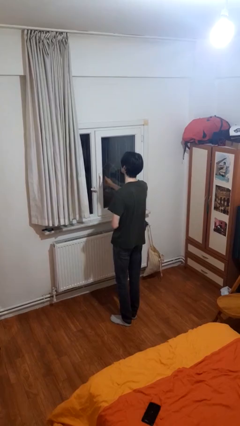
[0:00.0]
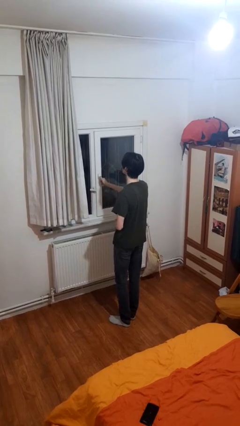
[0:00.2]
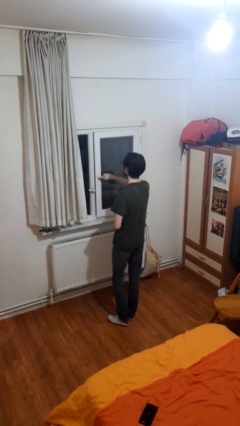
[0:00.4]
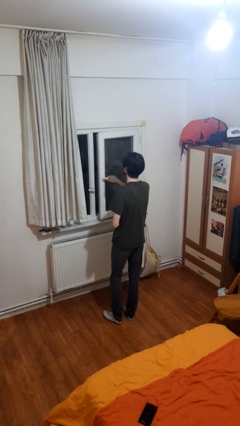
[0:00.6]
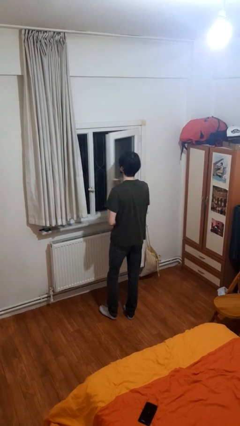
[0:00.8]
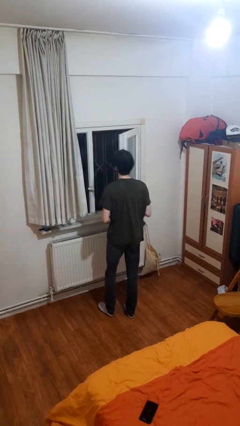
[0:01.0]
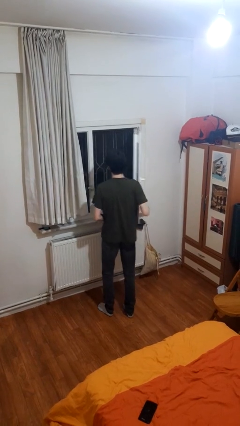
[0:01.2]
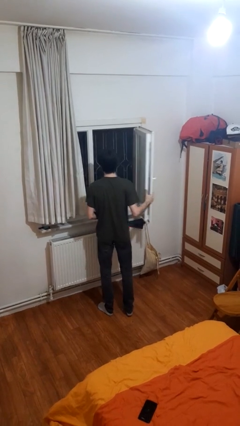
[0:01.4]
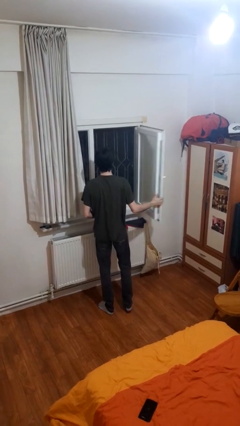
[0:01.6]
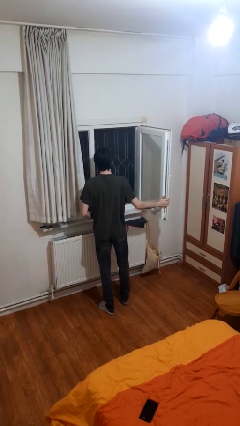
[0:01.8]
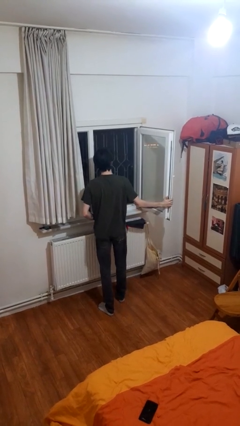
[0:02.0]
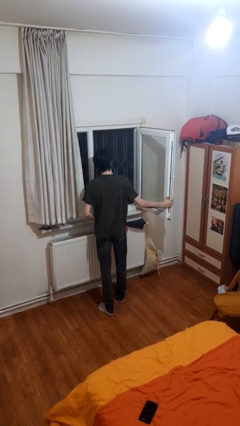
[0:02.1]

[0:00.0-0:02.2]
person opens home window

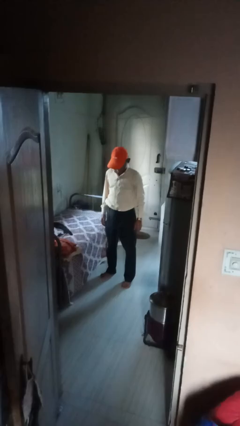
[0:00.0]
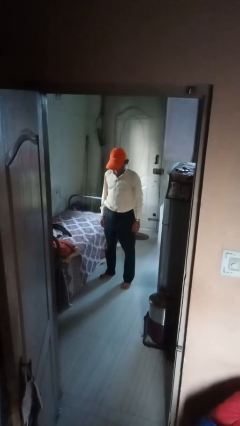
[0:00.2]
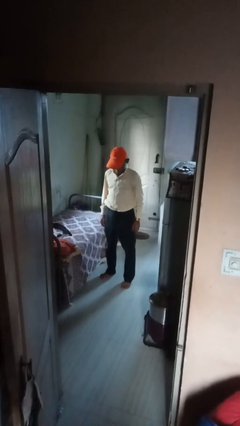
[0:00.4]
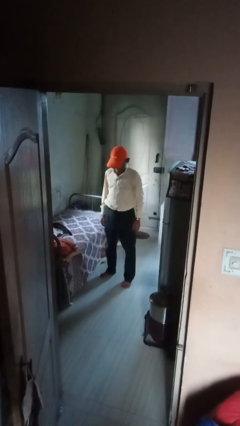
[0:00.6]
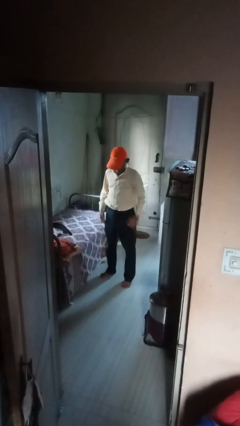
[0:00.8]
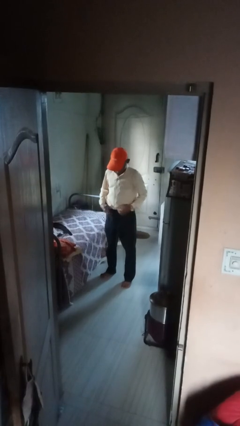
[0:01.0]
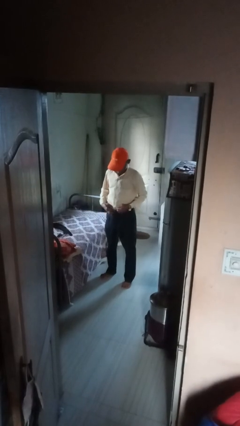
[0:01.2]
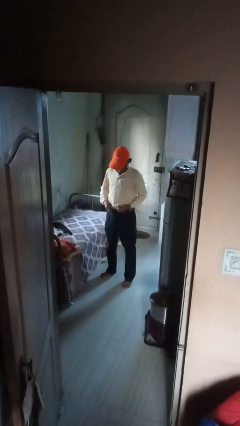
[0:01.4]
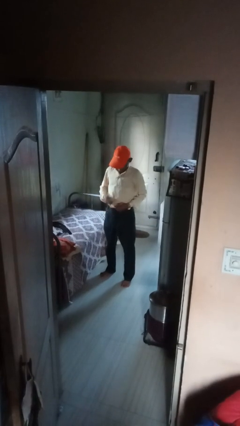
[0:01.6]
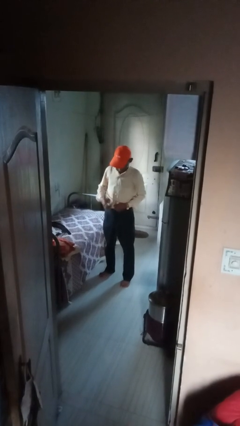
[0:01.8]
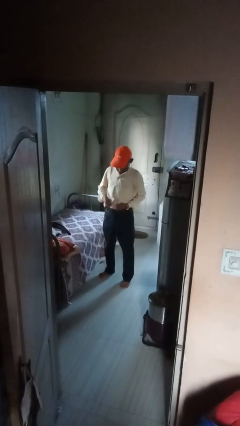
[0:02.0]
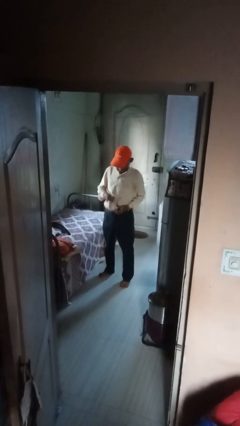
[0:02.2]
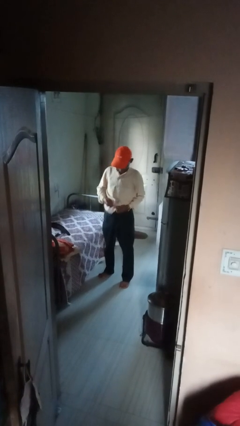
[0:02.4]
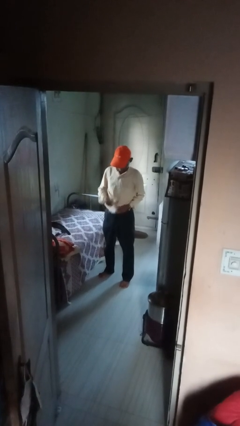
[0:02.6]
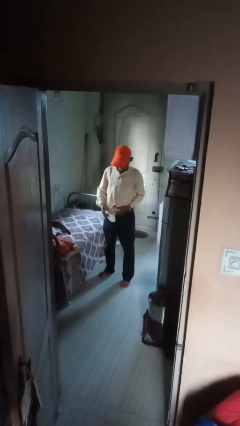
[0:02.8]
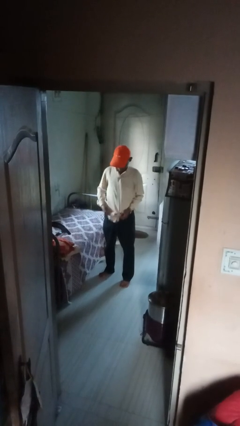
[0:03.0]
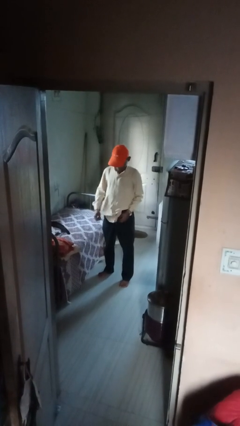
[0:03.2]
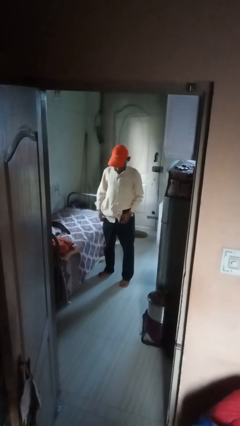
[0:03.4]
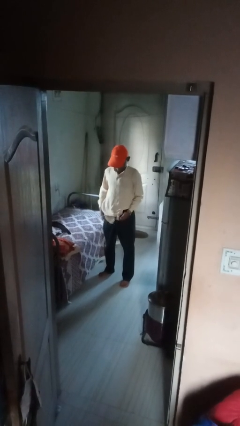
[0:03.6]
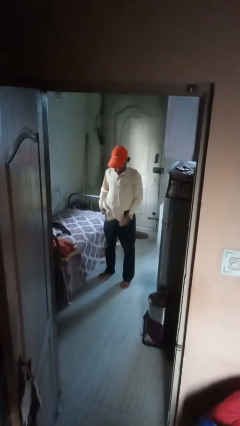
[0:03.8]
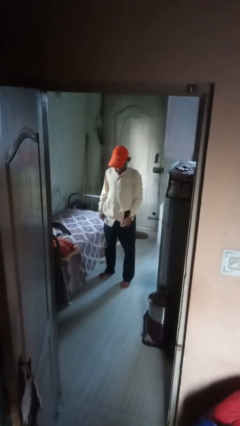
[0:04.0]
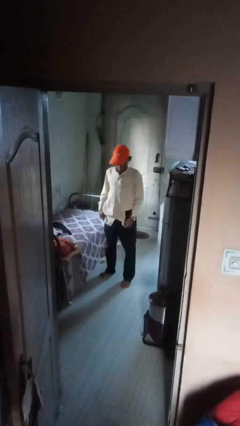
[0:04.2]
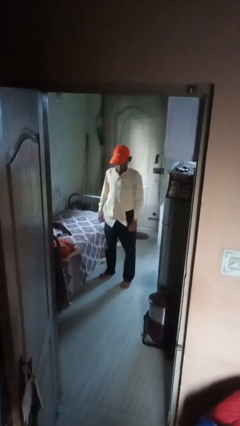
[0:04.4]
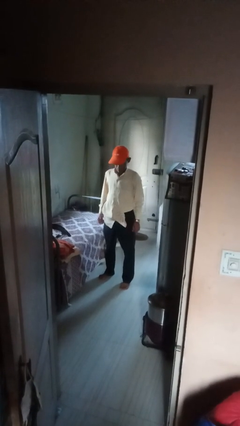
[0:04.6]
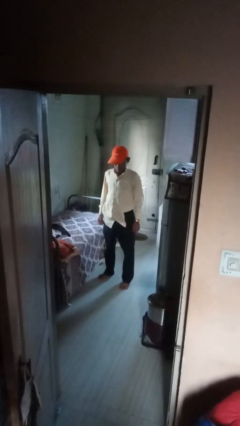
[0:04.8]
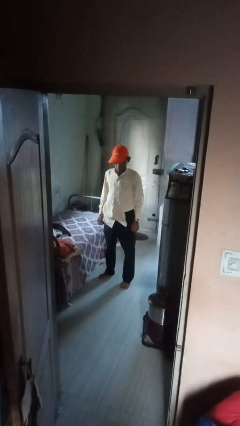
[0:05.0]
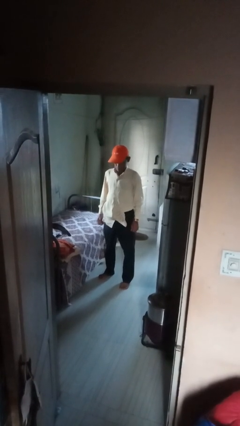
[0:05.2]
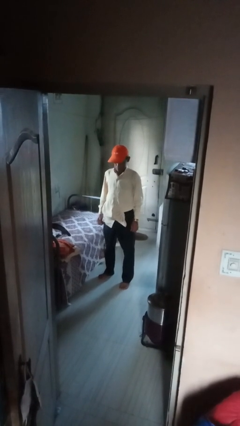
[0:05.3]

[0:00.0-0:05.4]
person untucks shirt

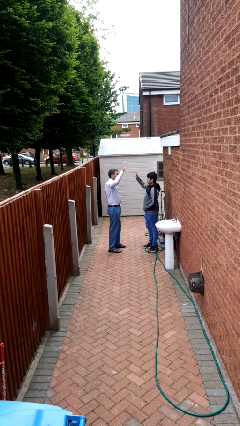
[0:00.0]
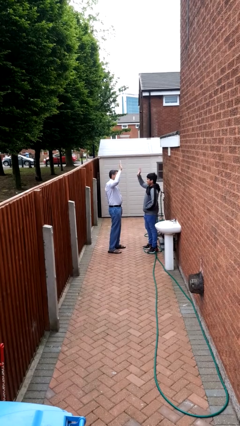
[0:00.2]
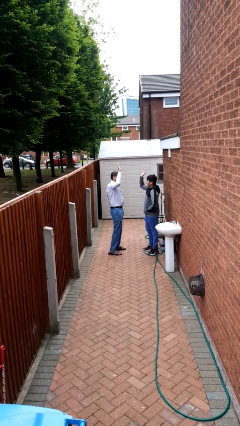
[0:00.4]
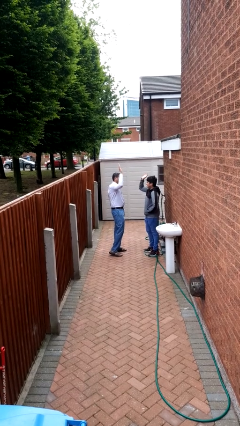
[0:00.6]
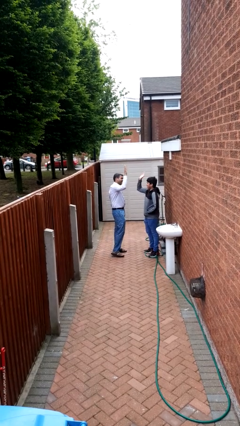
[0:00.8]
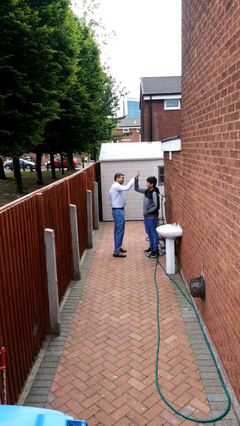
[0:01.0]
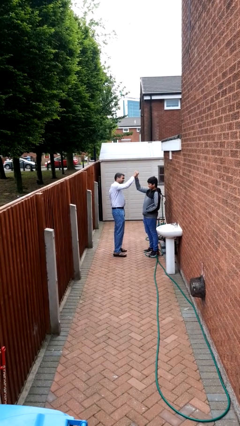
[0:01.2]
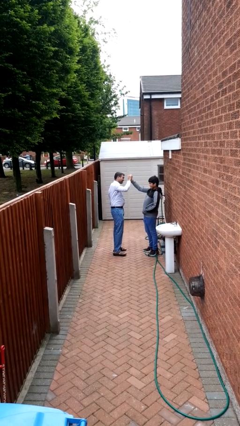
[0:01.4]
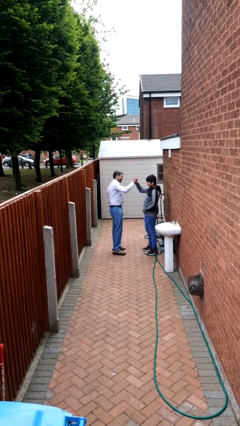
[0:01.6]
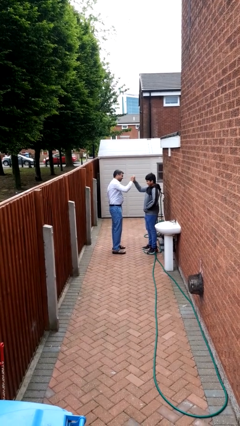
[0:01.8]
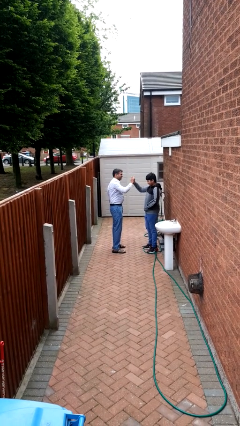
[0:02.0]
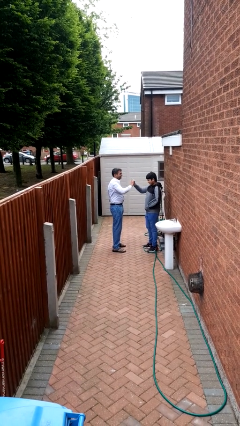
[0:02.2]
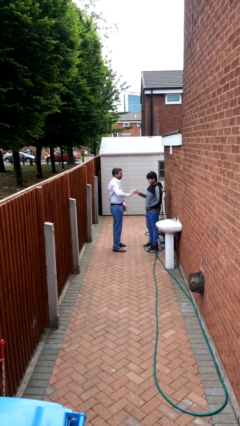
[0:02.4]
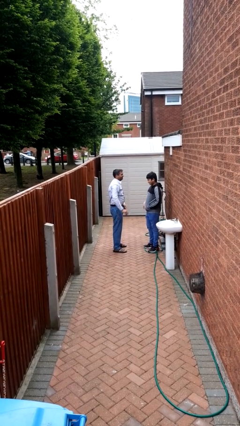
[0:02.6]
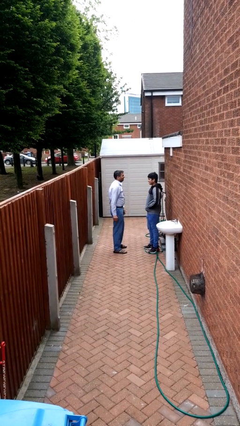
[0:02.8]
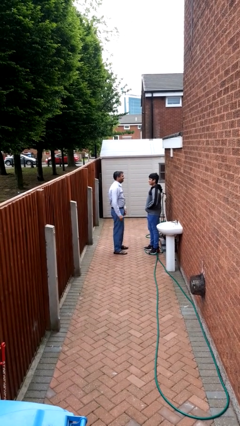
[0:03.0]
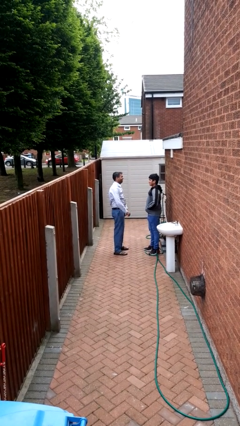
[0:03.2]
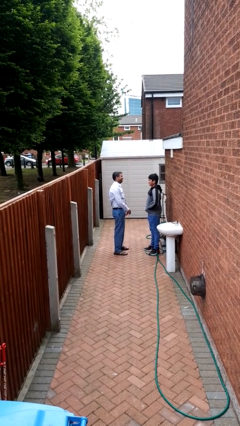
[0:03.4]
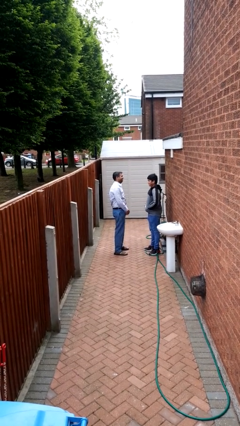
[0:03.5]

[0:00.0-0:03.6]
person highfives hand

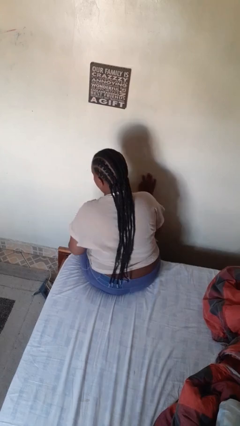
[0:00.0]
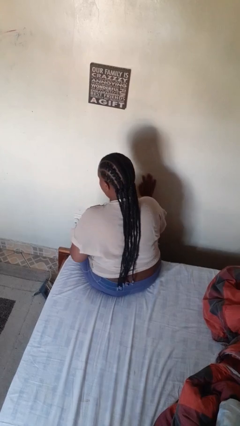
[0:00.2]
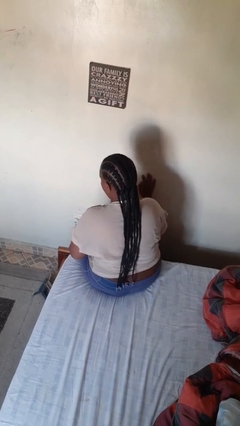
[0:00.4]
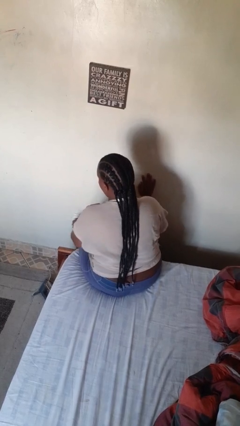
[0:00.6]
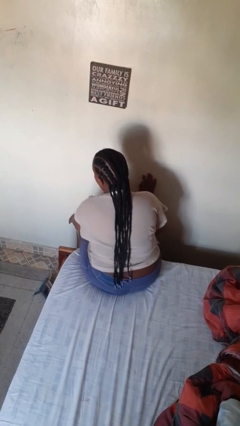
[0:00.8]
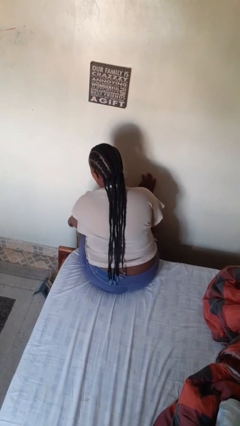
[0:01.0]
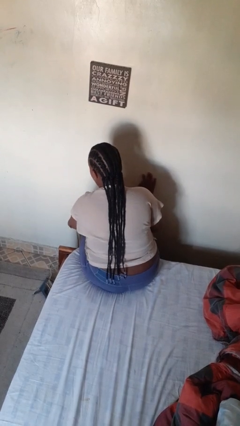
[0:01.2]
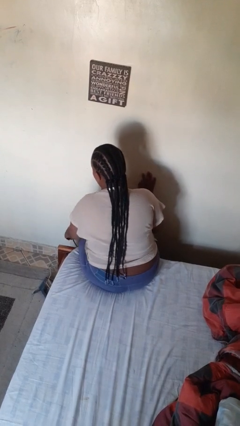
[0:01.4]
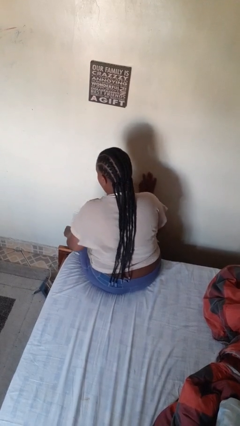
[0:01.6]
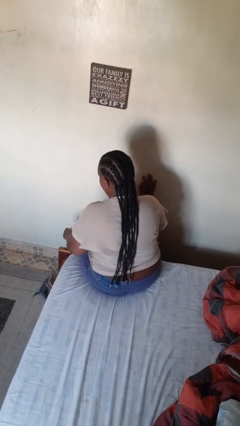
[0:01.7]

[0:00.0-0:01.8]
person unplugs from electrical socket

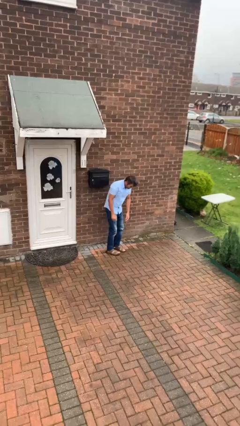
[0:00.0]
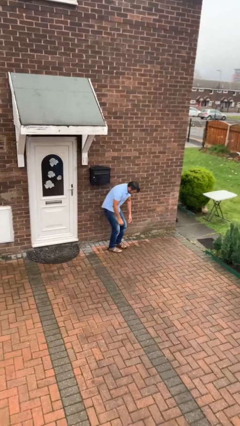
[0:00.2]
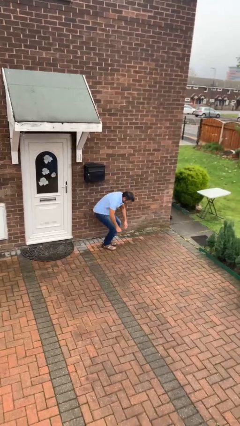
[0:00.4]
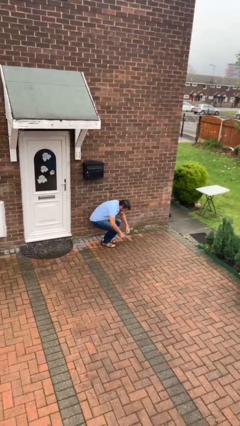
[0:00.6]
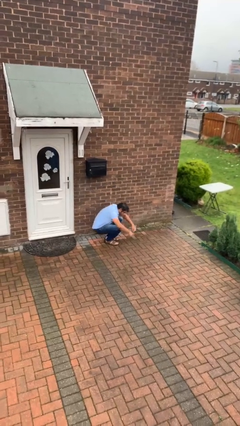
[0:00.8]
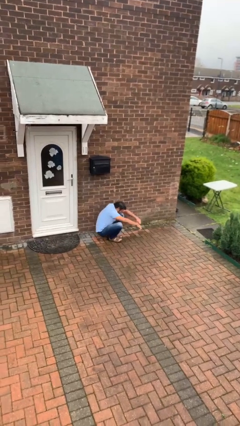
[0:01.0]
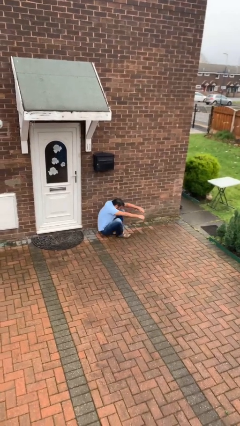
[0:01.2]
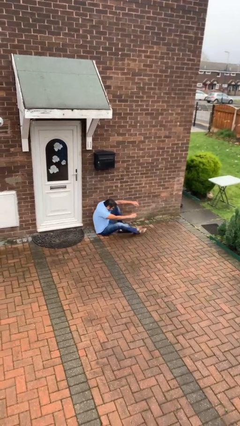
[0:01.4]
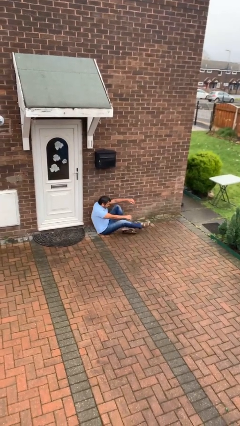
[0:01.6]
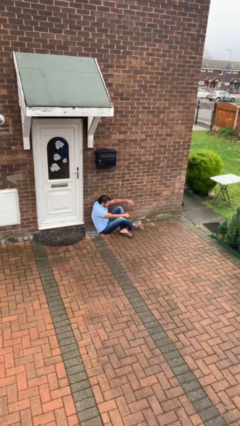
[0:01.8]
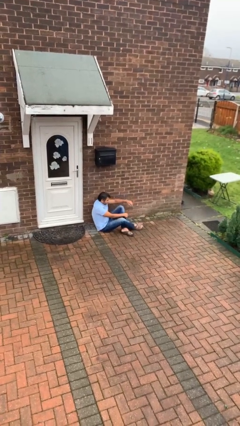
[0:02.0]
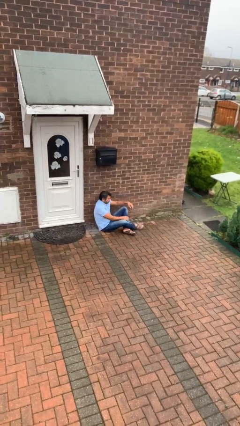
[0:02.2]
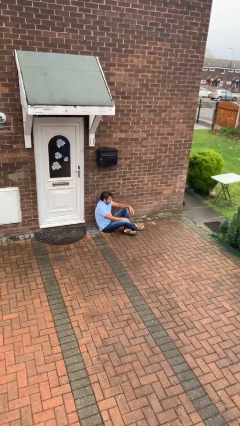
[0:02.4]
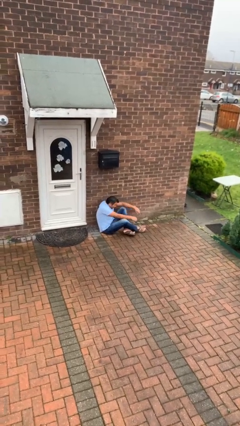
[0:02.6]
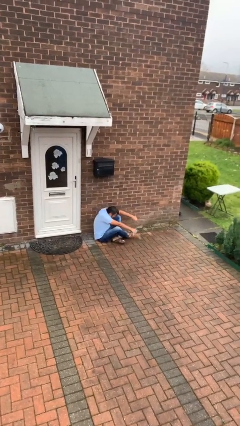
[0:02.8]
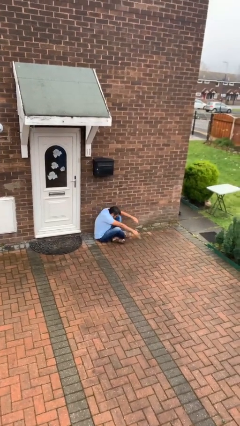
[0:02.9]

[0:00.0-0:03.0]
person sits down

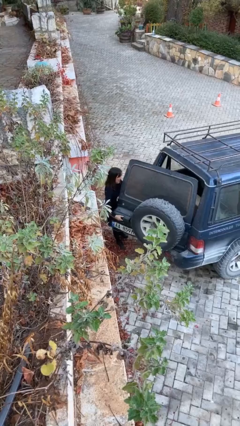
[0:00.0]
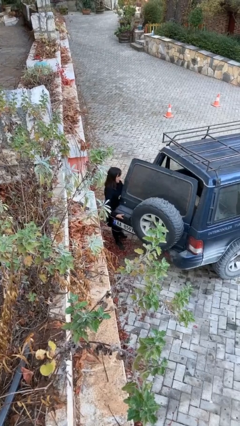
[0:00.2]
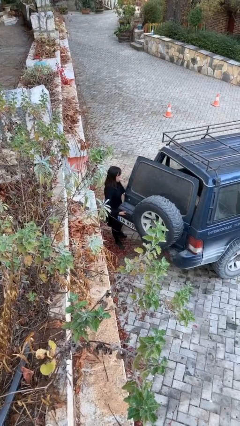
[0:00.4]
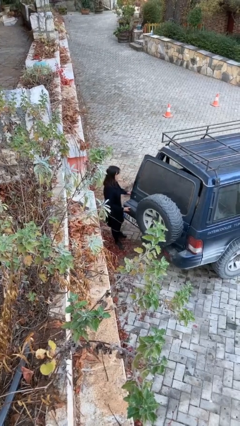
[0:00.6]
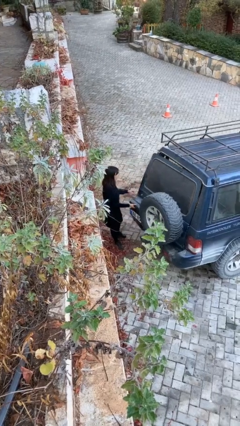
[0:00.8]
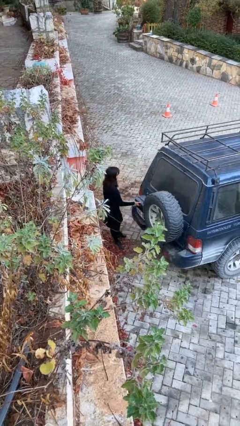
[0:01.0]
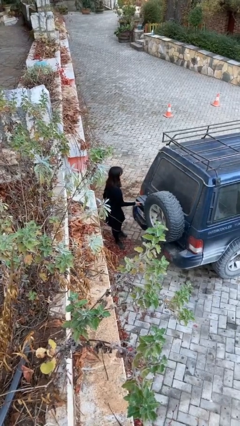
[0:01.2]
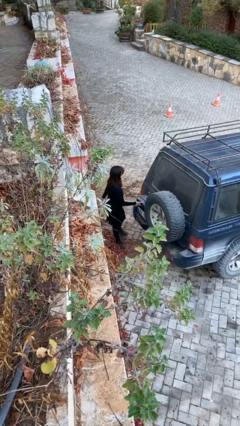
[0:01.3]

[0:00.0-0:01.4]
person closes car trunk
